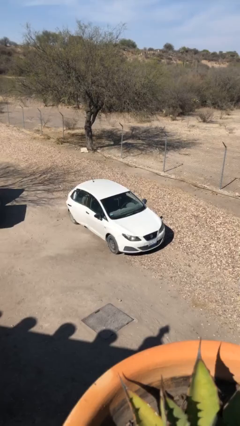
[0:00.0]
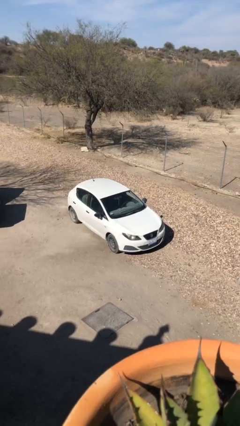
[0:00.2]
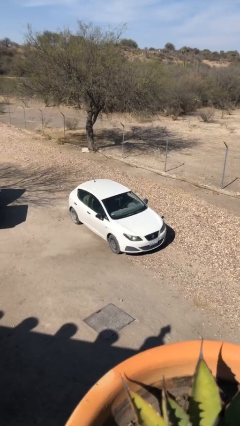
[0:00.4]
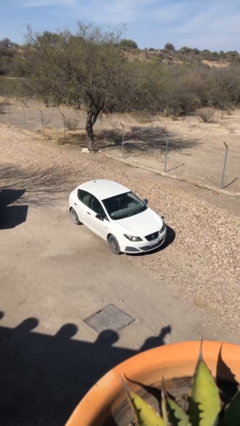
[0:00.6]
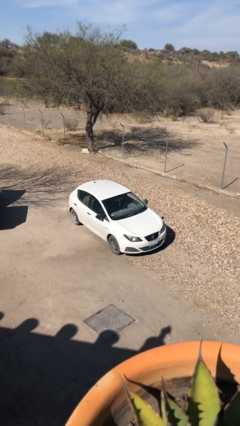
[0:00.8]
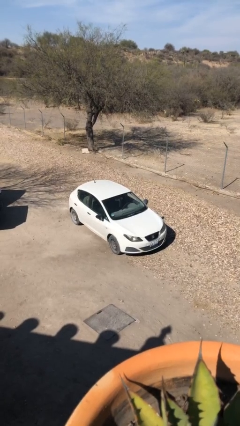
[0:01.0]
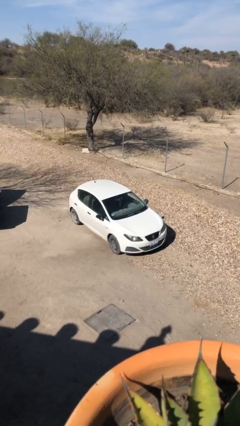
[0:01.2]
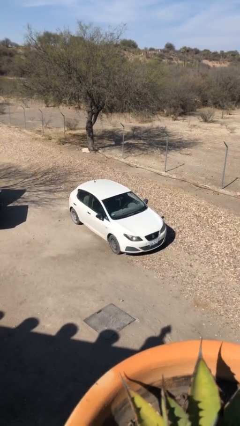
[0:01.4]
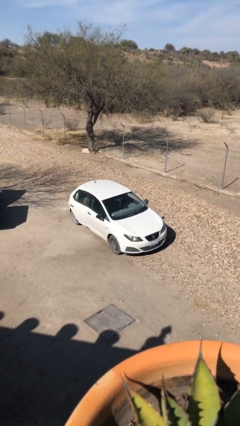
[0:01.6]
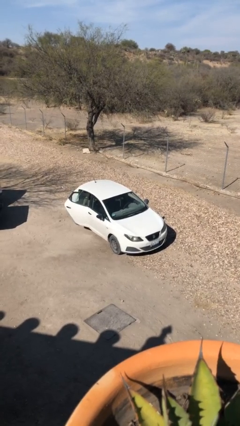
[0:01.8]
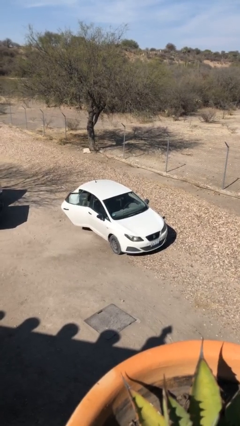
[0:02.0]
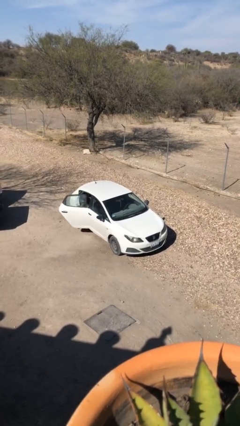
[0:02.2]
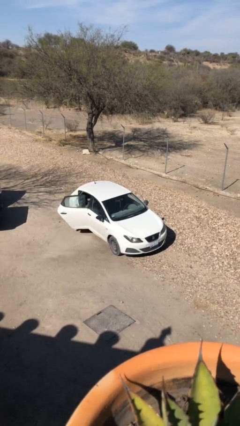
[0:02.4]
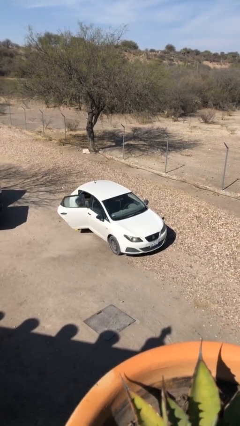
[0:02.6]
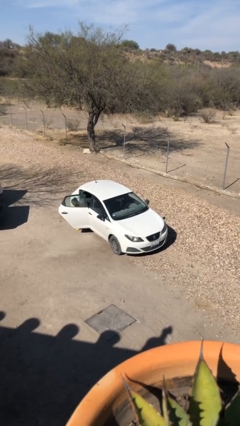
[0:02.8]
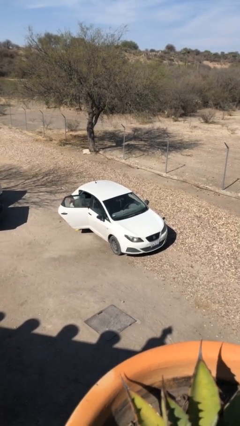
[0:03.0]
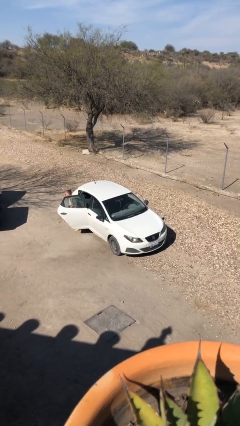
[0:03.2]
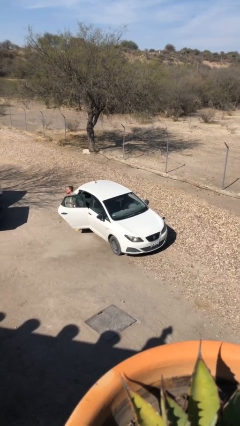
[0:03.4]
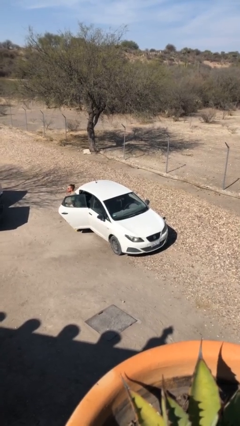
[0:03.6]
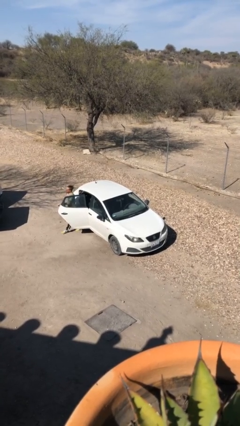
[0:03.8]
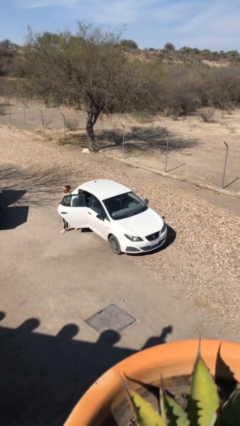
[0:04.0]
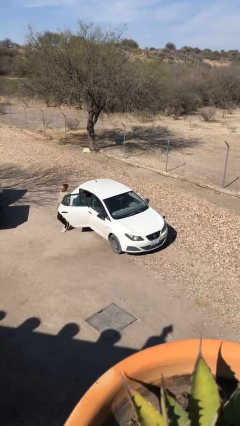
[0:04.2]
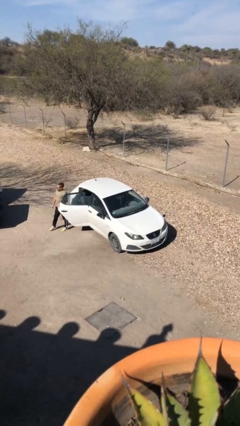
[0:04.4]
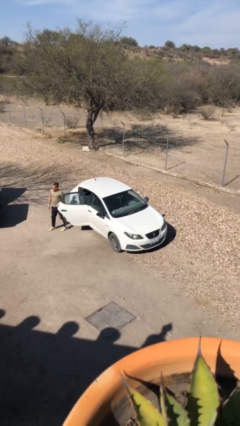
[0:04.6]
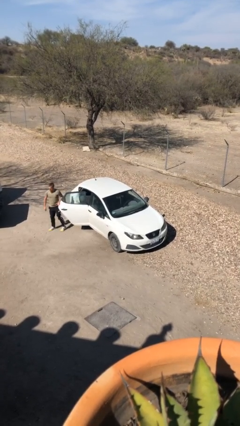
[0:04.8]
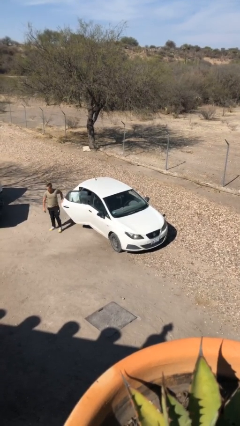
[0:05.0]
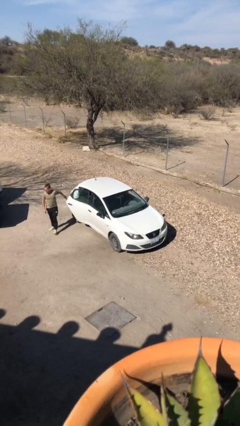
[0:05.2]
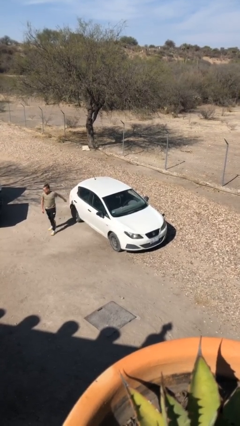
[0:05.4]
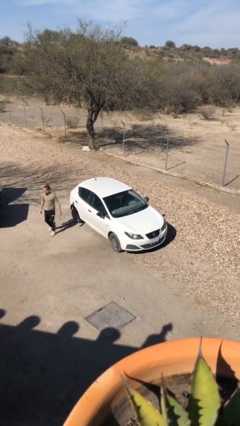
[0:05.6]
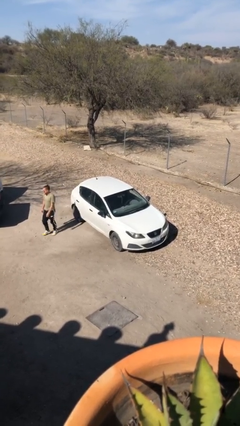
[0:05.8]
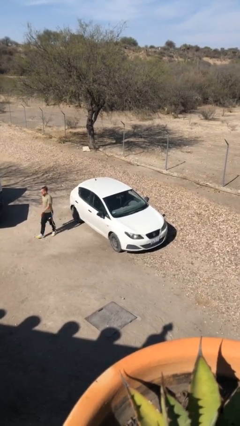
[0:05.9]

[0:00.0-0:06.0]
car drops off person

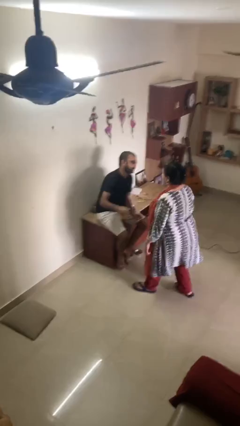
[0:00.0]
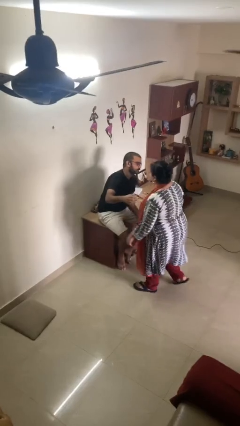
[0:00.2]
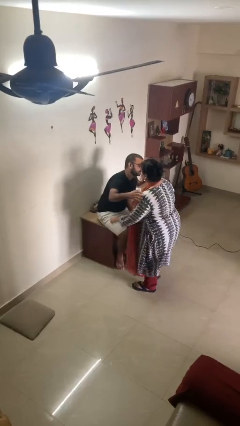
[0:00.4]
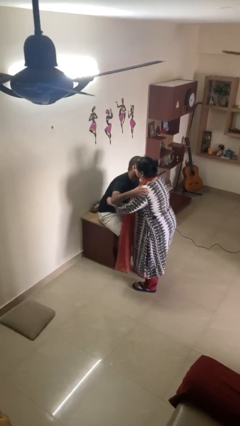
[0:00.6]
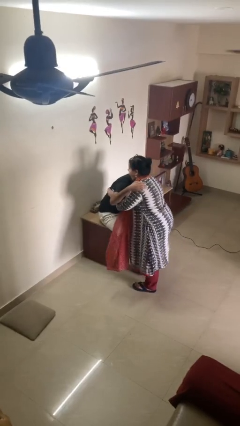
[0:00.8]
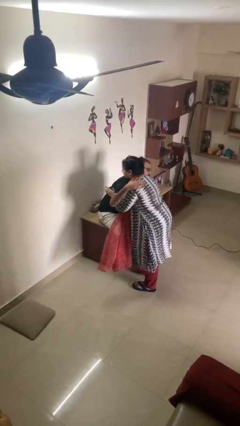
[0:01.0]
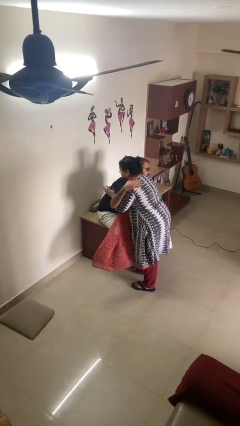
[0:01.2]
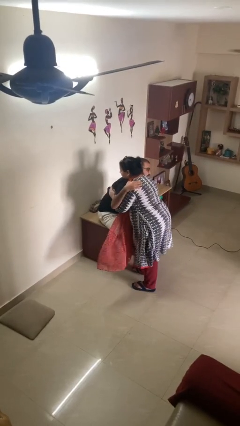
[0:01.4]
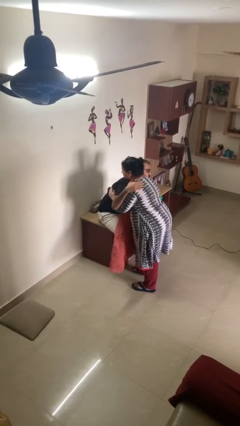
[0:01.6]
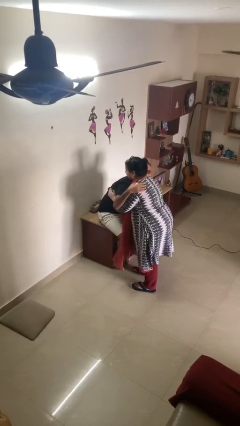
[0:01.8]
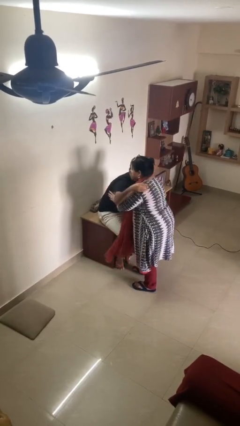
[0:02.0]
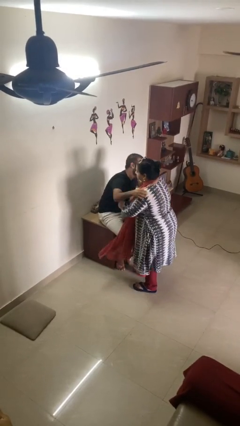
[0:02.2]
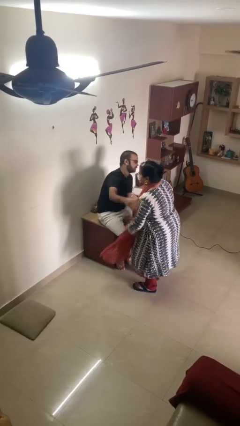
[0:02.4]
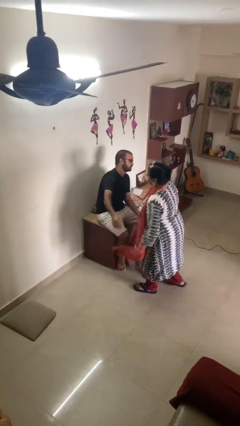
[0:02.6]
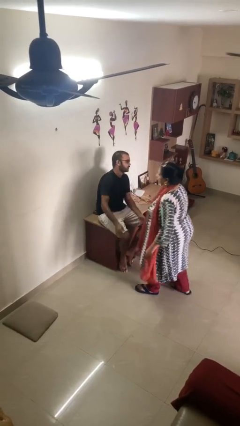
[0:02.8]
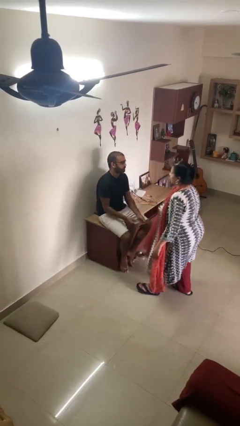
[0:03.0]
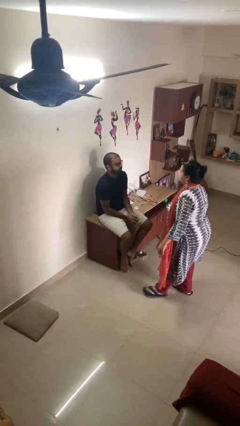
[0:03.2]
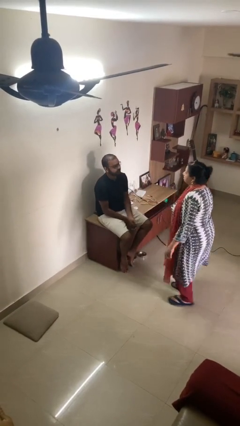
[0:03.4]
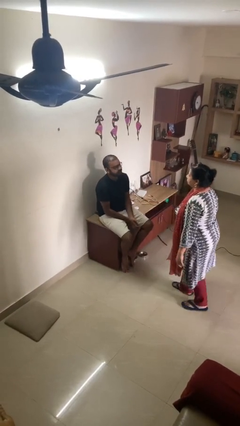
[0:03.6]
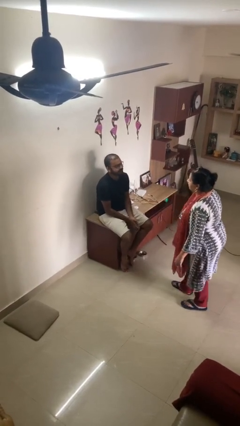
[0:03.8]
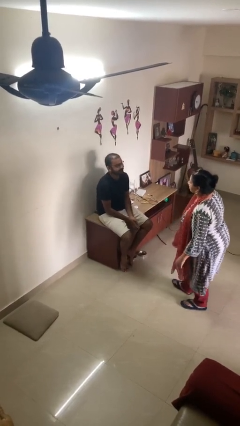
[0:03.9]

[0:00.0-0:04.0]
person embraces person

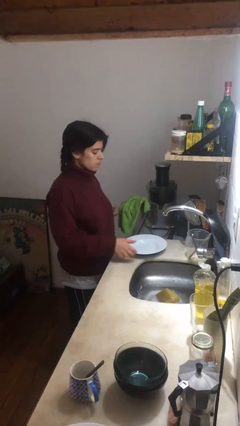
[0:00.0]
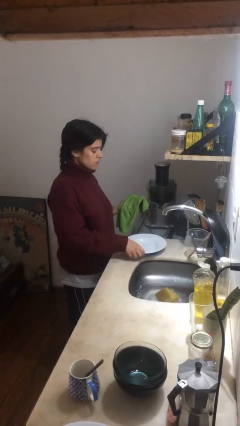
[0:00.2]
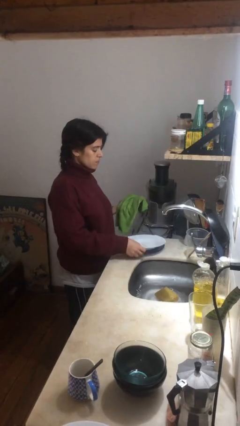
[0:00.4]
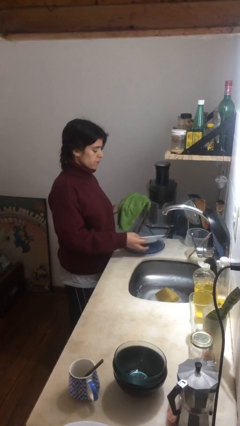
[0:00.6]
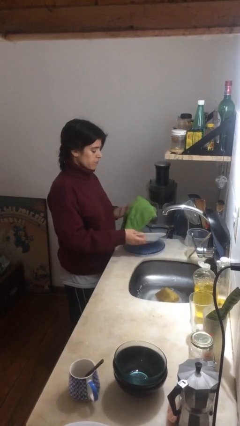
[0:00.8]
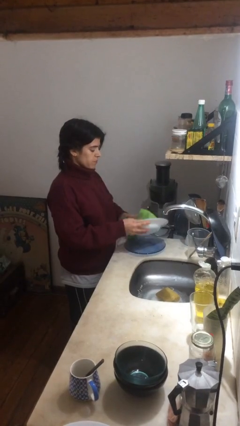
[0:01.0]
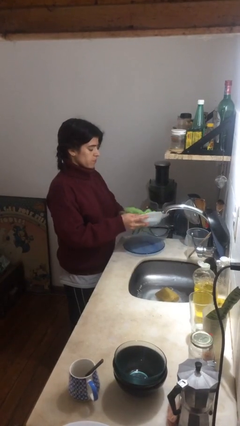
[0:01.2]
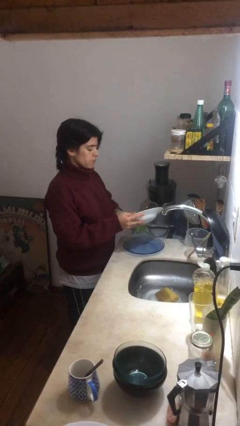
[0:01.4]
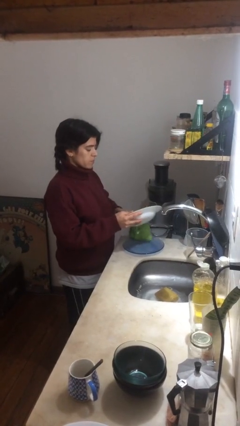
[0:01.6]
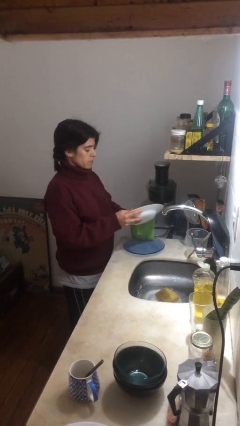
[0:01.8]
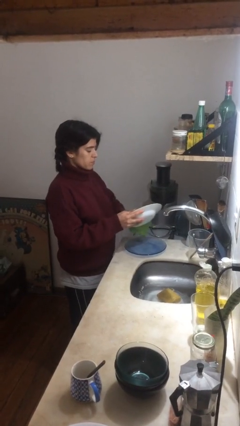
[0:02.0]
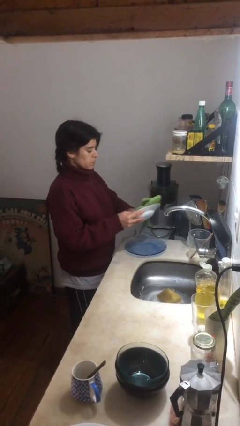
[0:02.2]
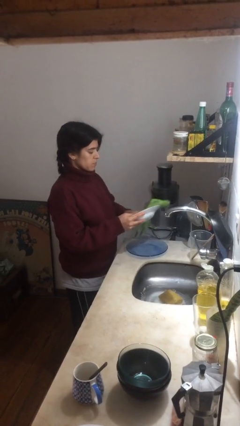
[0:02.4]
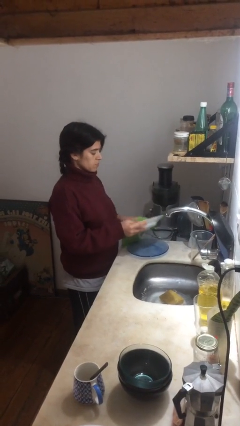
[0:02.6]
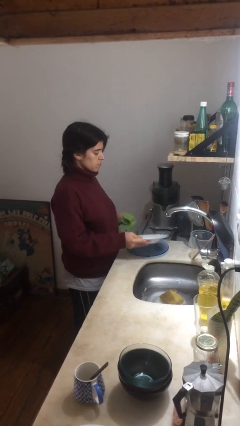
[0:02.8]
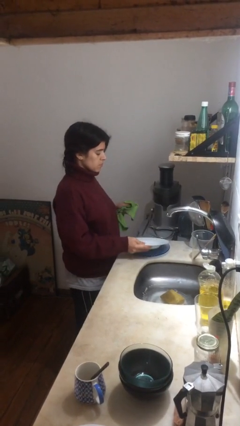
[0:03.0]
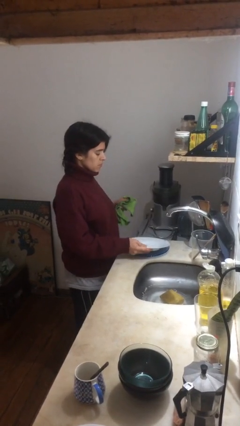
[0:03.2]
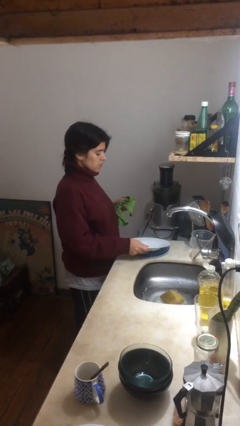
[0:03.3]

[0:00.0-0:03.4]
person dries dish

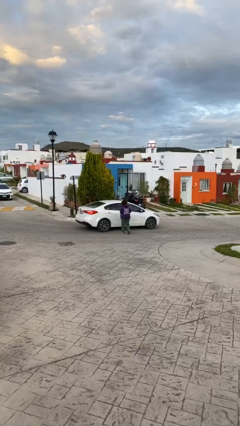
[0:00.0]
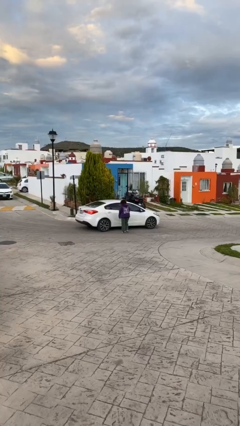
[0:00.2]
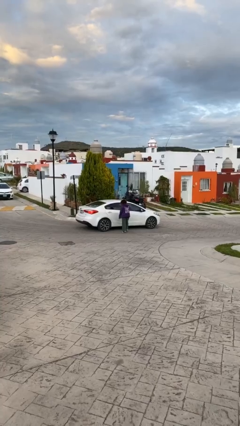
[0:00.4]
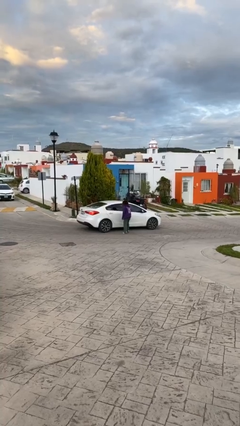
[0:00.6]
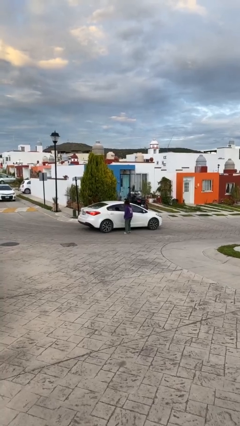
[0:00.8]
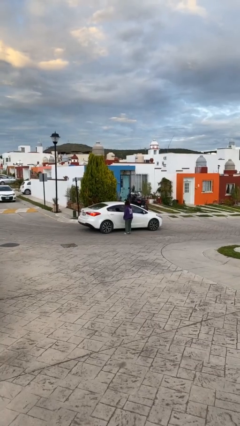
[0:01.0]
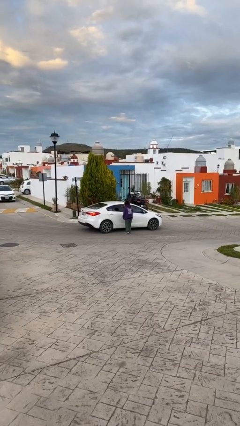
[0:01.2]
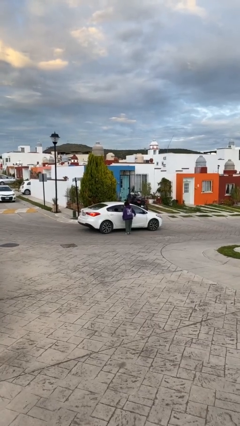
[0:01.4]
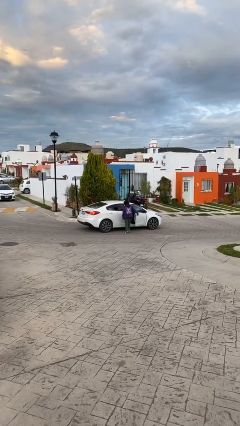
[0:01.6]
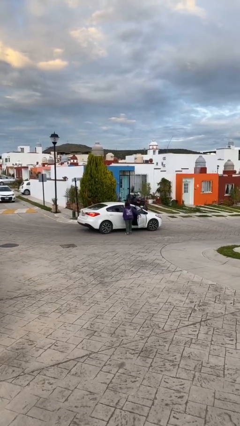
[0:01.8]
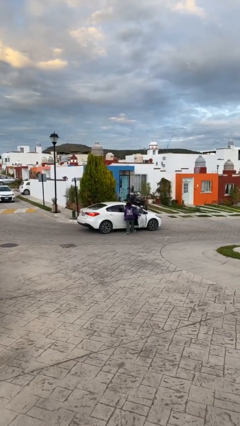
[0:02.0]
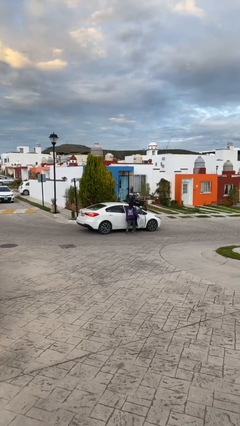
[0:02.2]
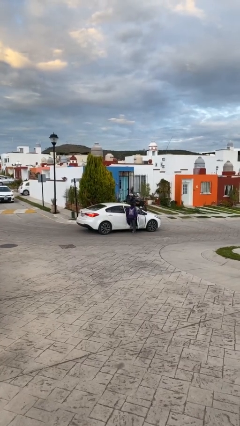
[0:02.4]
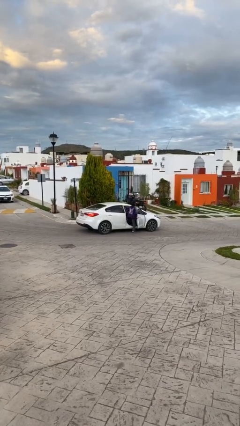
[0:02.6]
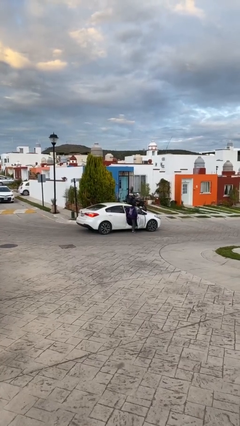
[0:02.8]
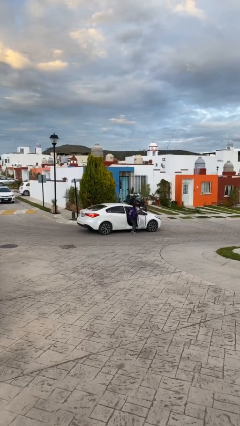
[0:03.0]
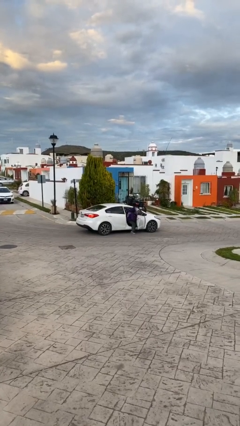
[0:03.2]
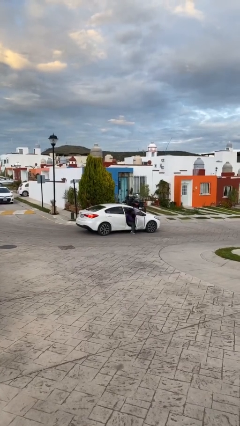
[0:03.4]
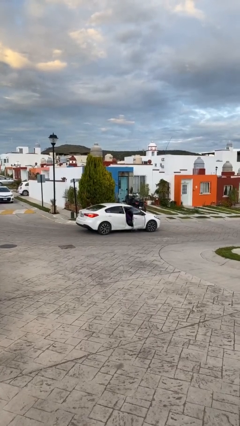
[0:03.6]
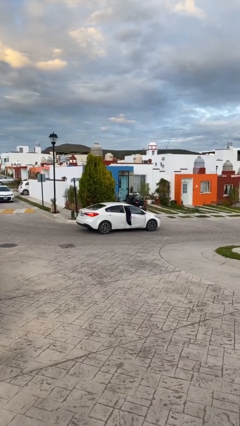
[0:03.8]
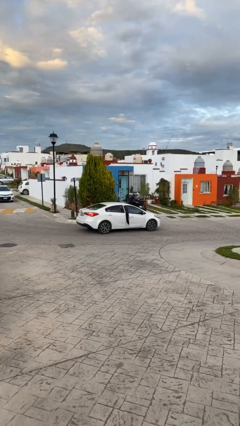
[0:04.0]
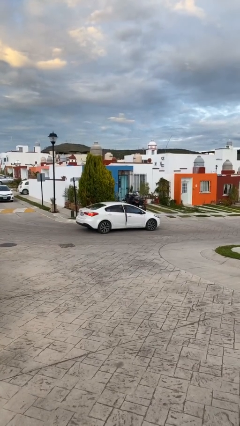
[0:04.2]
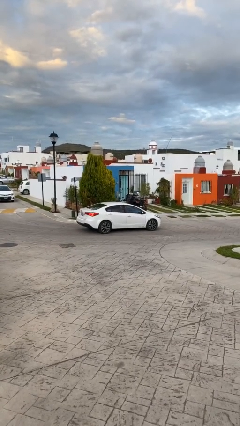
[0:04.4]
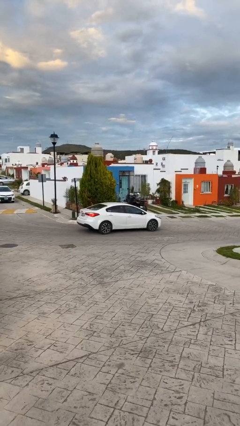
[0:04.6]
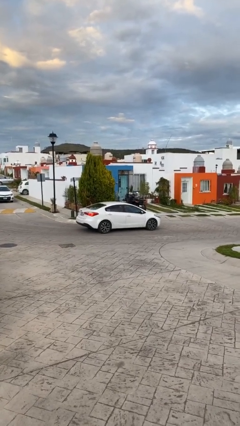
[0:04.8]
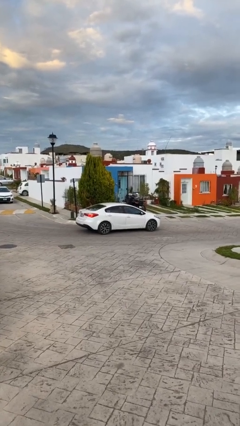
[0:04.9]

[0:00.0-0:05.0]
car picks up person
